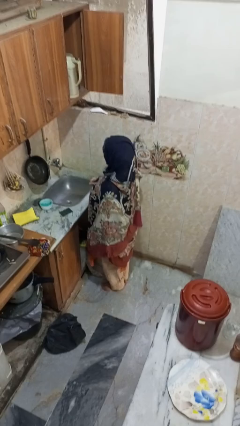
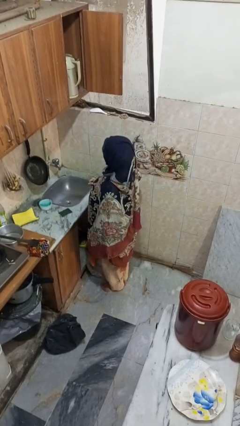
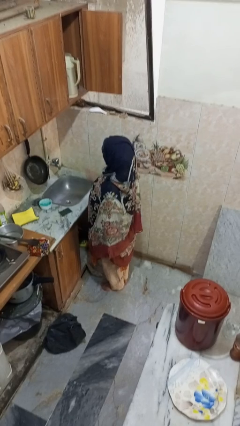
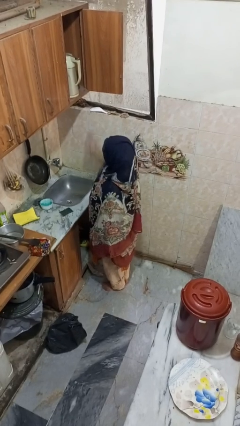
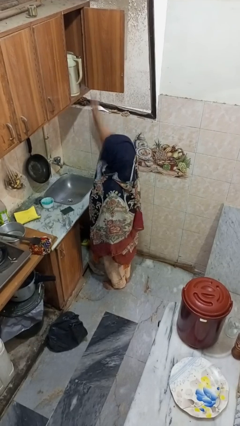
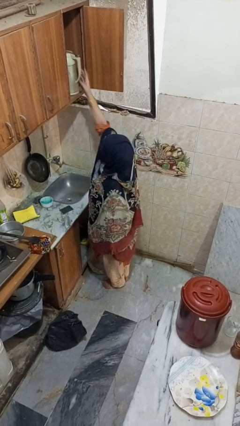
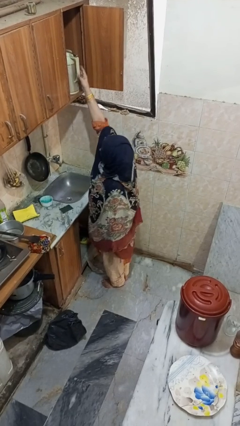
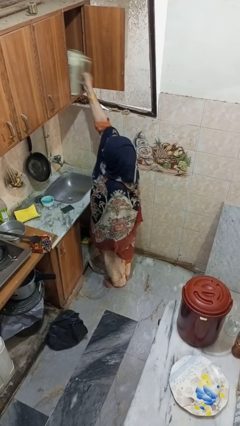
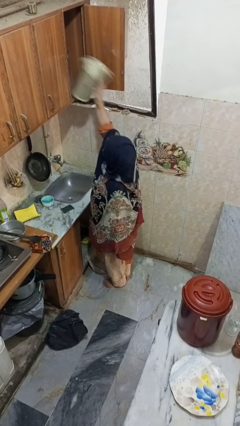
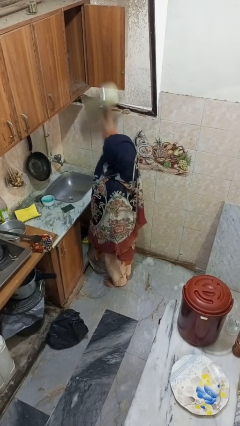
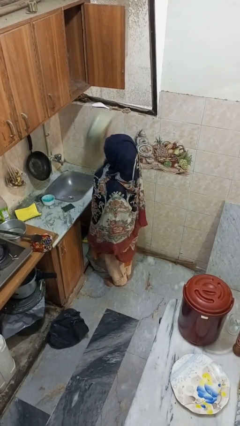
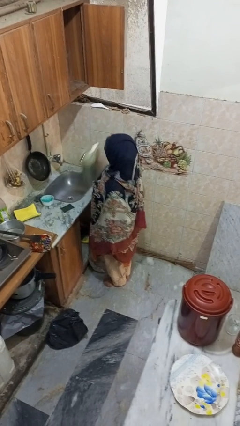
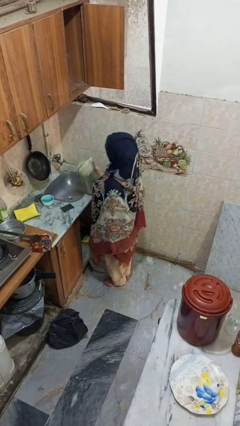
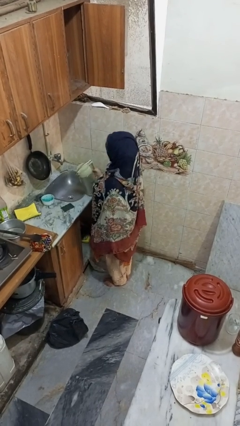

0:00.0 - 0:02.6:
person puts object in cabinet

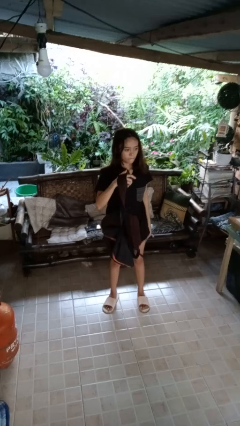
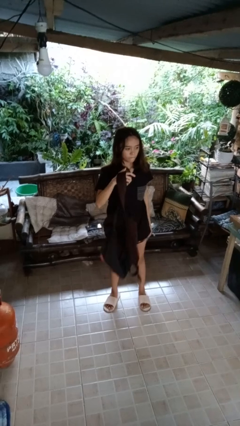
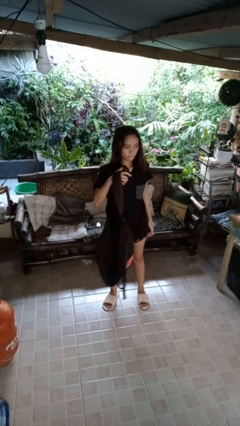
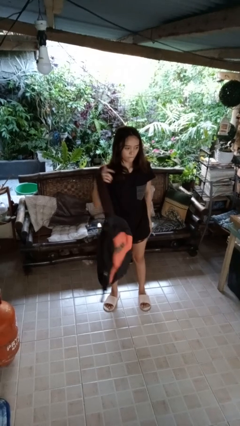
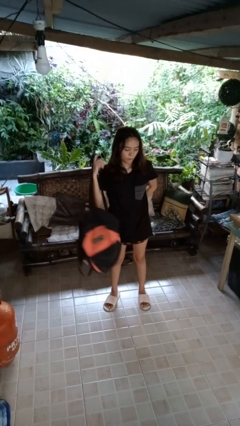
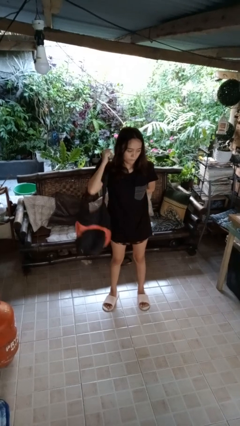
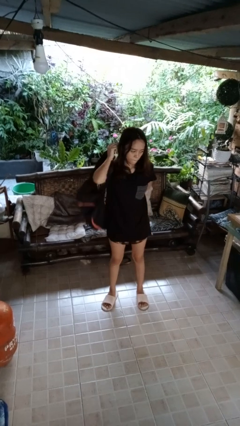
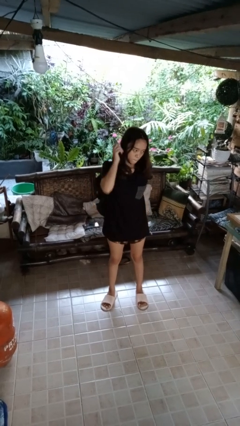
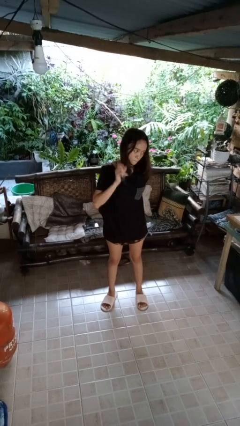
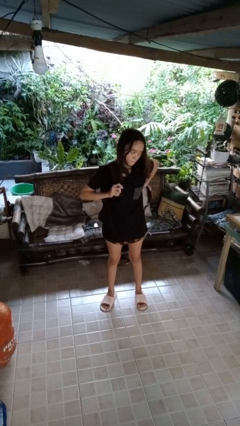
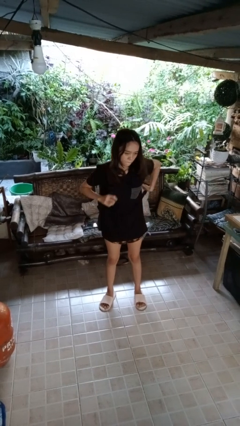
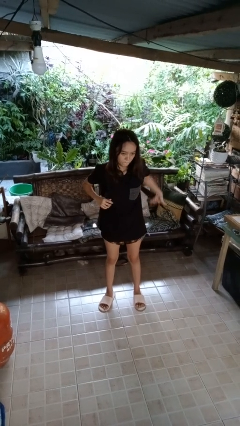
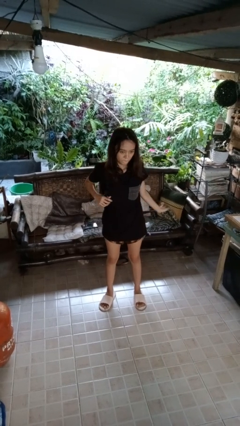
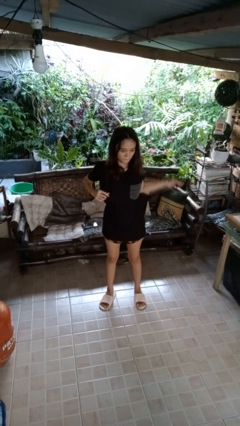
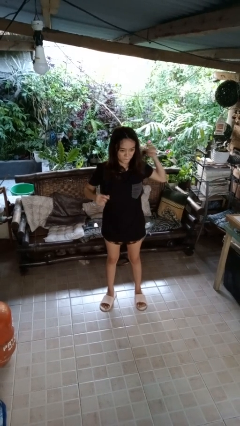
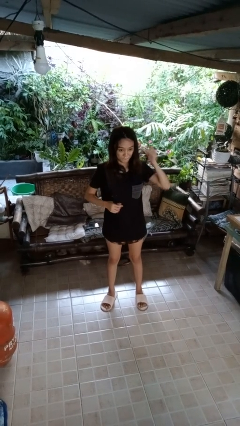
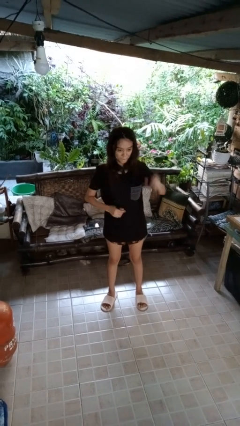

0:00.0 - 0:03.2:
person puts on backpack

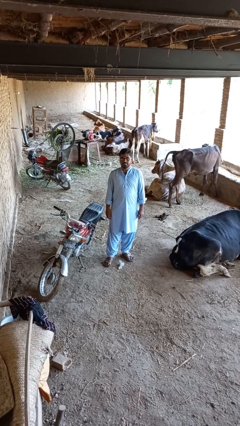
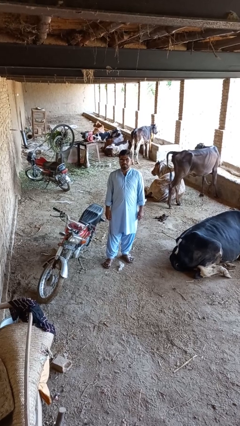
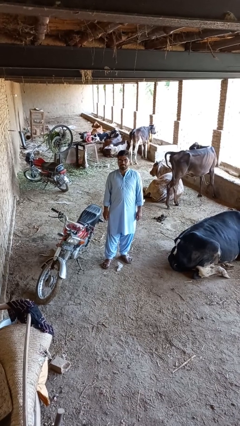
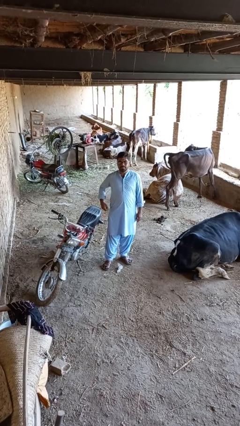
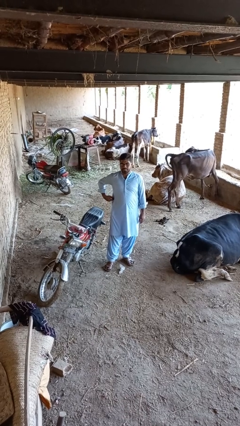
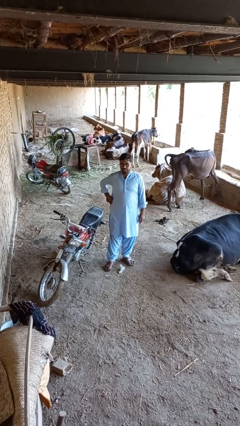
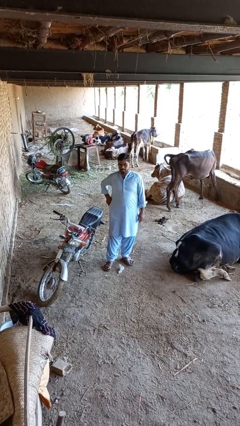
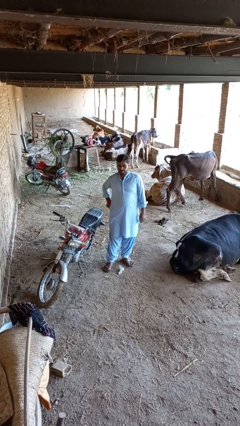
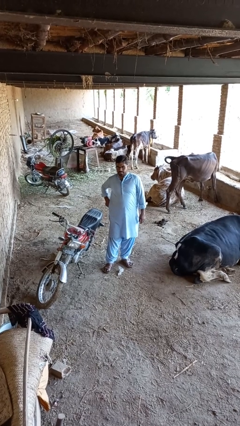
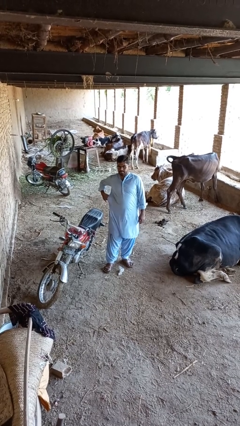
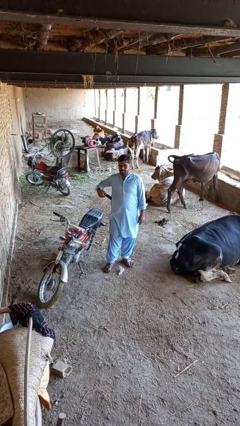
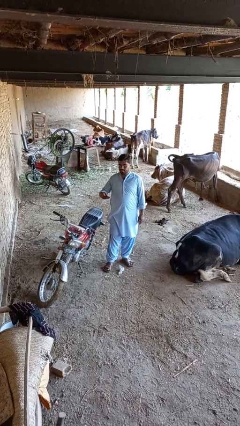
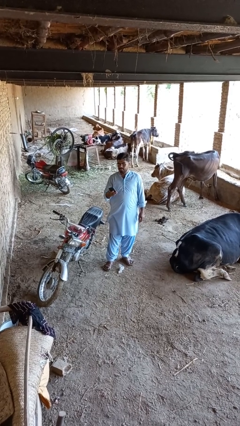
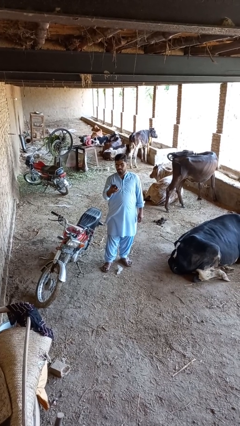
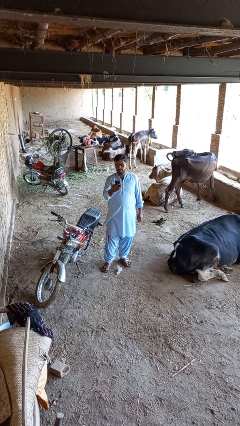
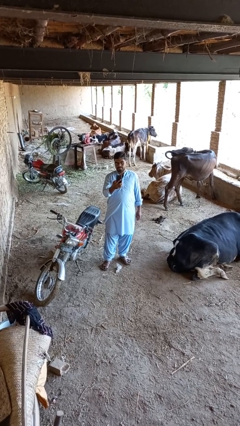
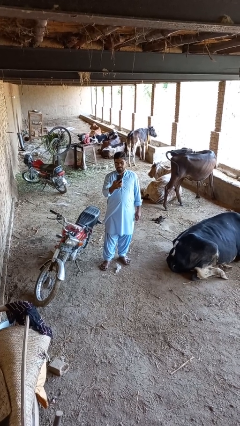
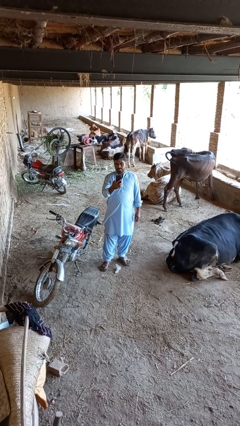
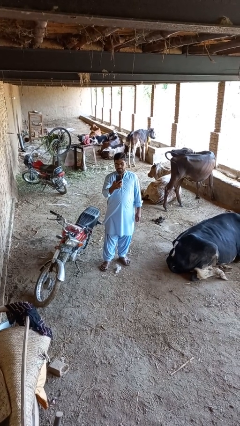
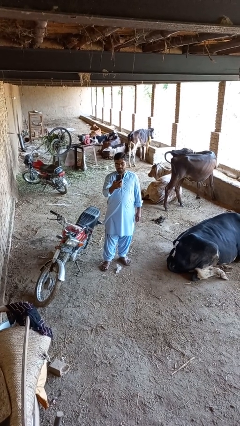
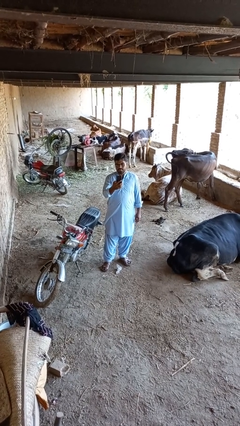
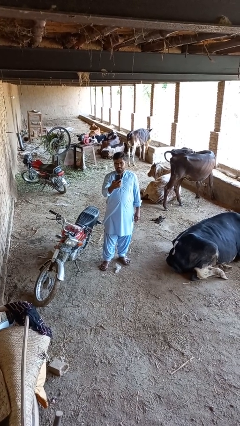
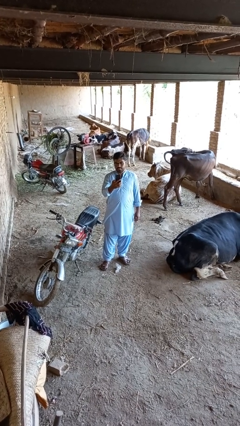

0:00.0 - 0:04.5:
person takes phone from pocket

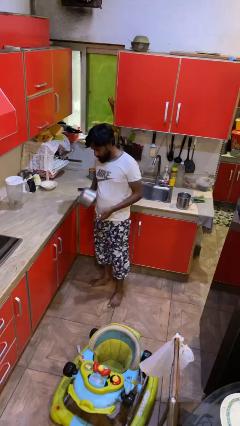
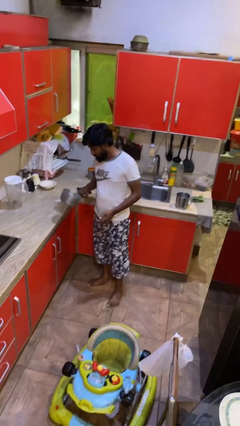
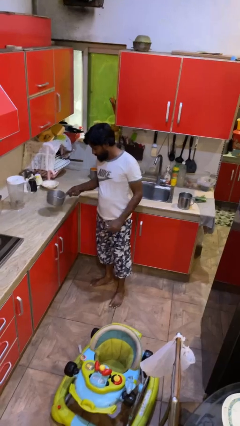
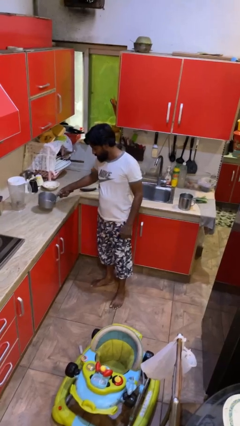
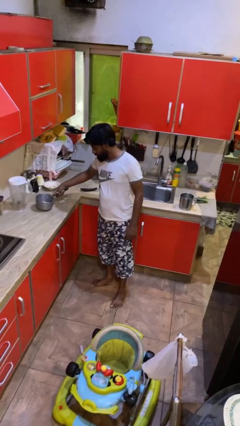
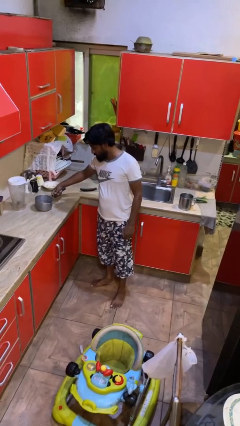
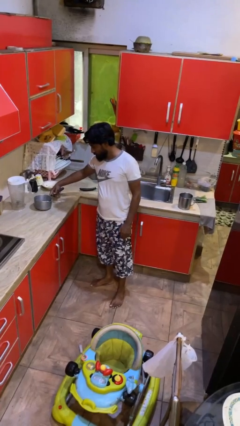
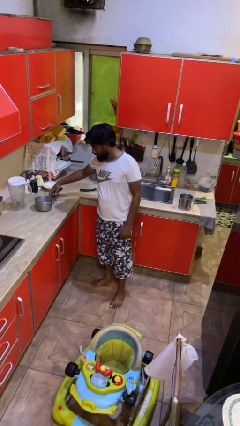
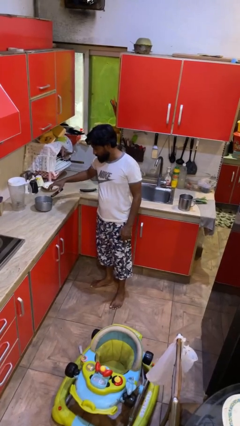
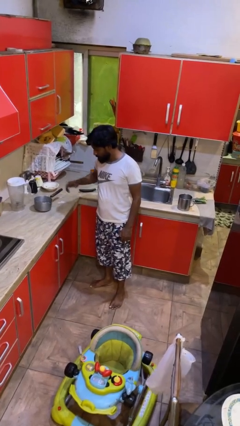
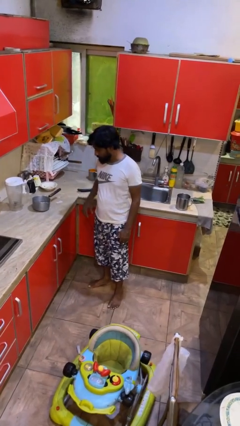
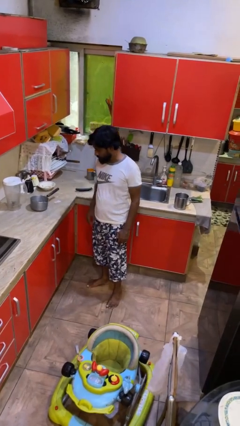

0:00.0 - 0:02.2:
person puts down object on countertop

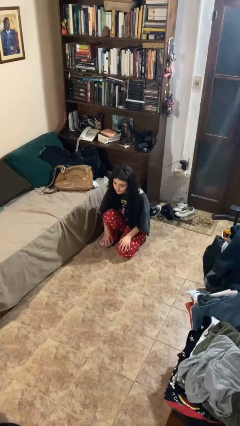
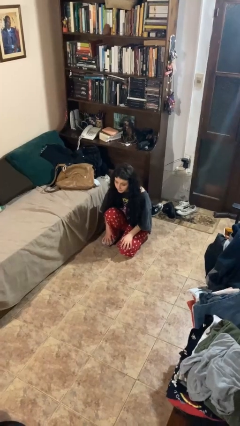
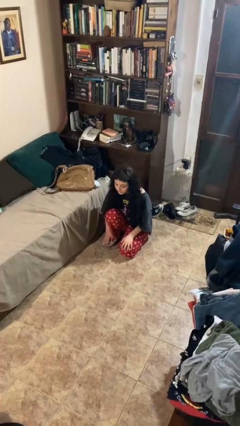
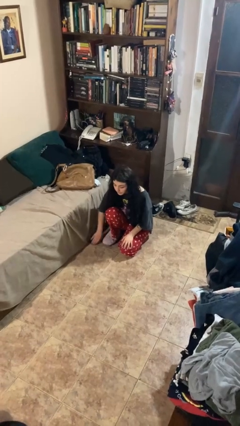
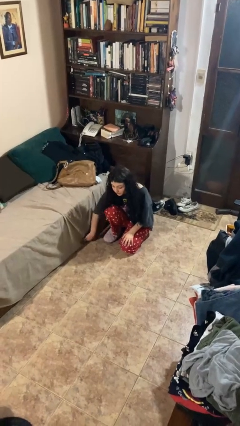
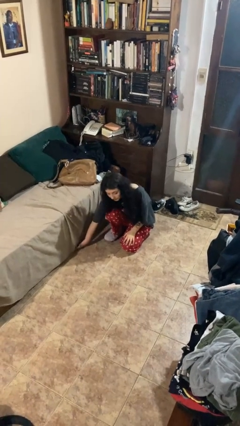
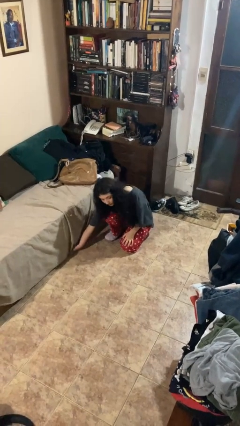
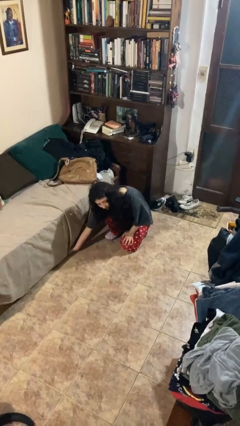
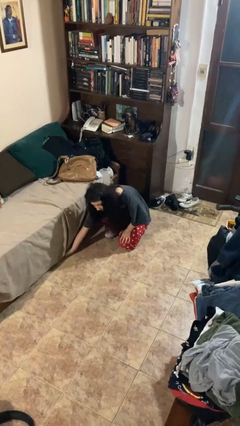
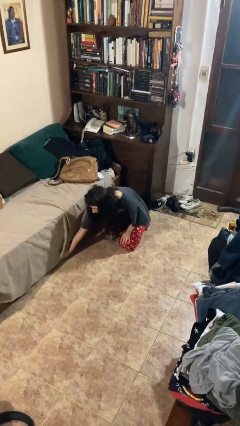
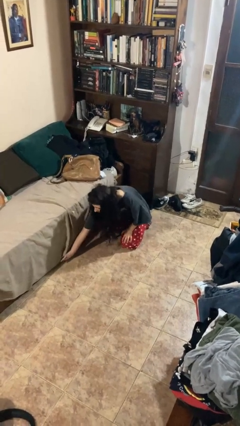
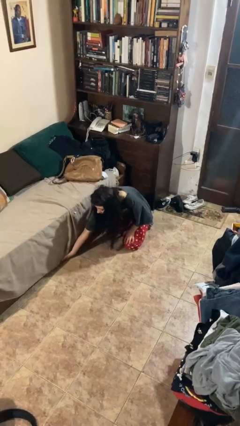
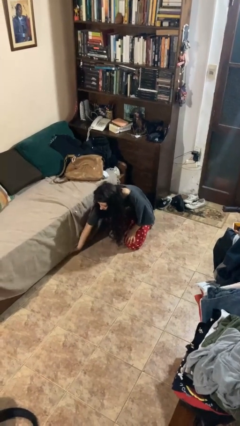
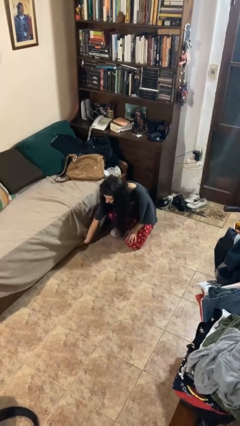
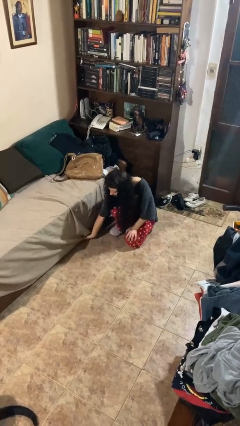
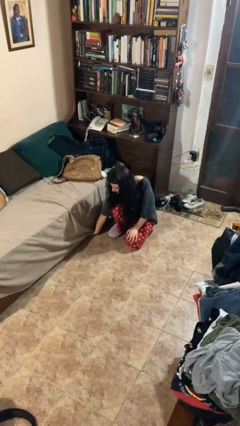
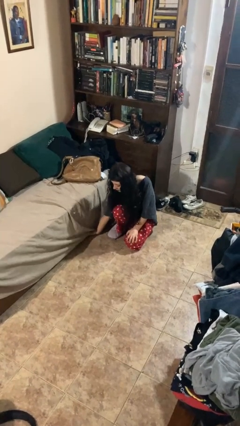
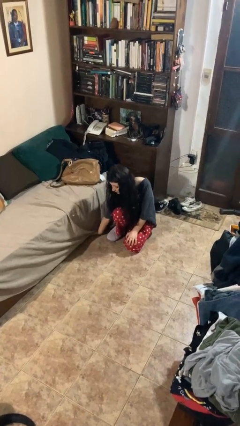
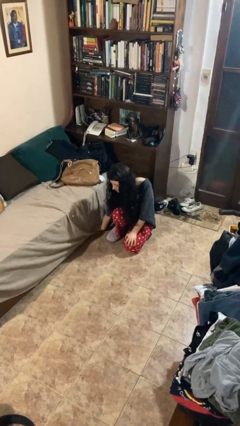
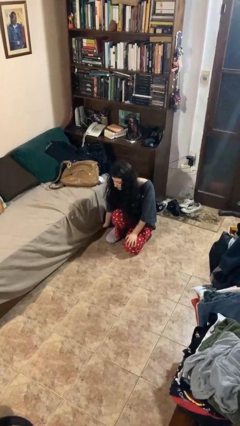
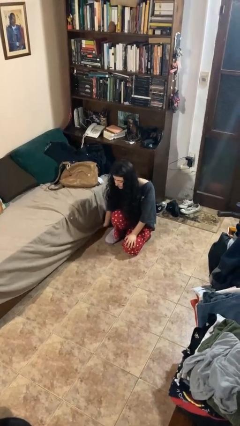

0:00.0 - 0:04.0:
person searches under couch

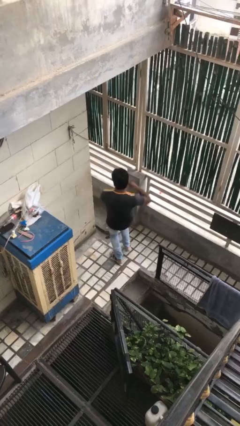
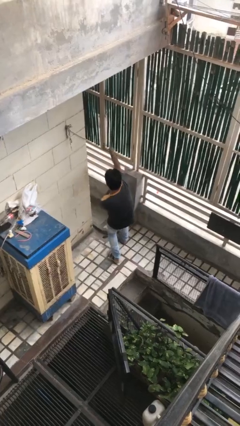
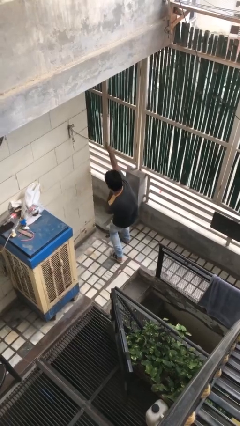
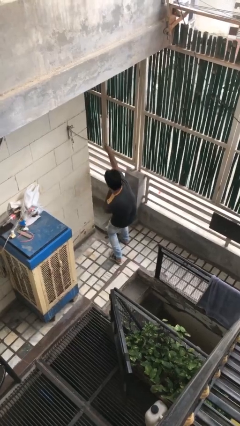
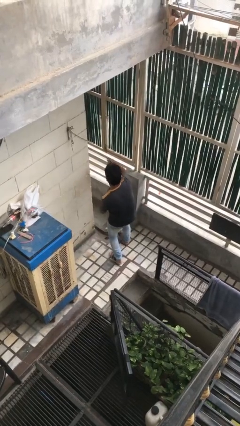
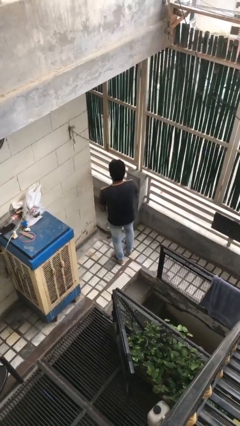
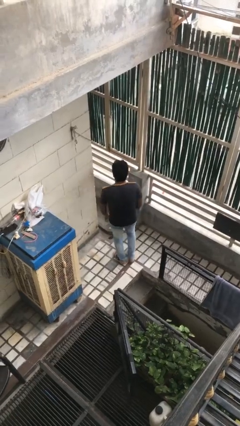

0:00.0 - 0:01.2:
person karate chop

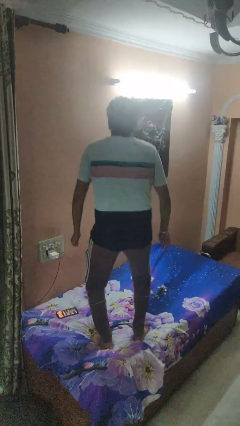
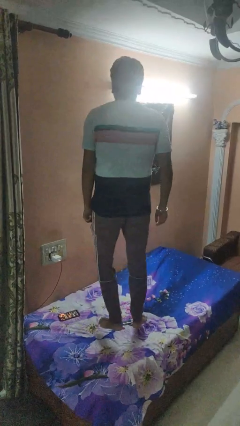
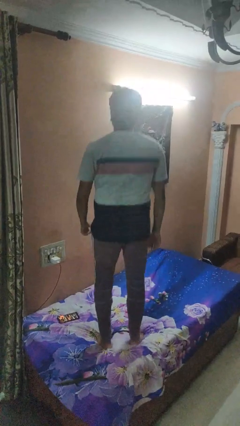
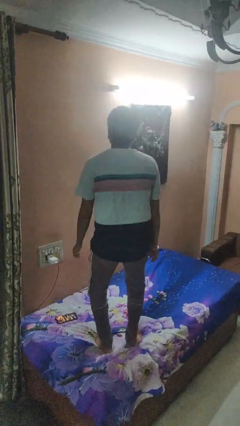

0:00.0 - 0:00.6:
person jumps on bed
